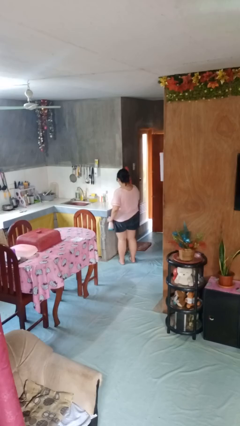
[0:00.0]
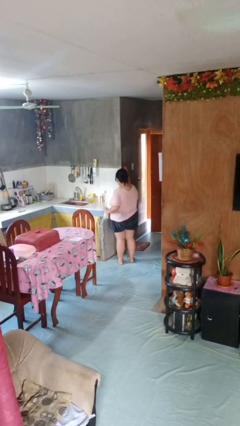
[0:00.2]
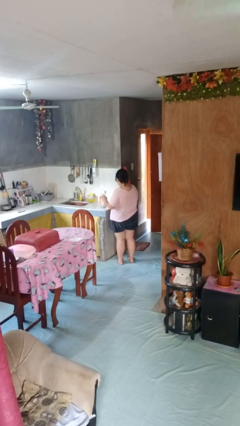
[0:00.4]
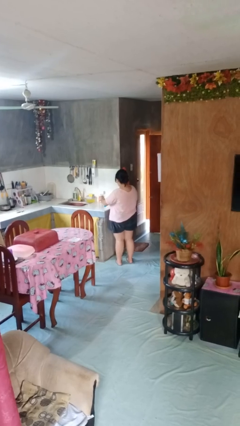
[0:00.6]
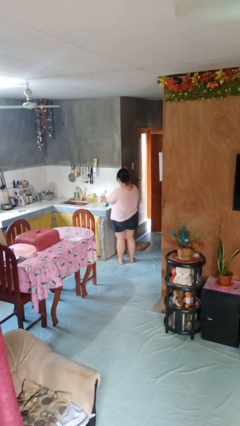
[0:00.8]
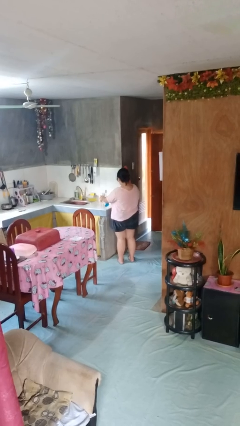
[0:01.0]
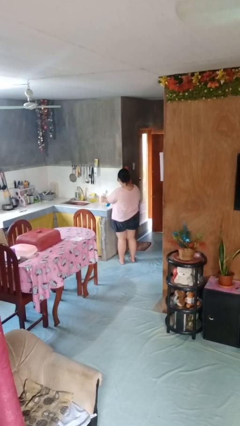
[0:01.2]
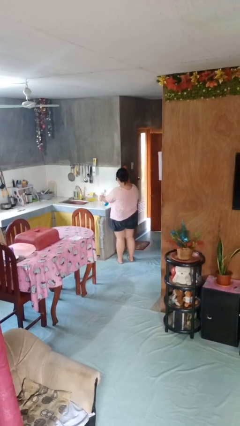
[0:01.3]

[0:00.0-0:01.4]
person sprays from bottle

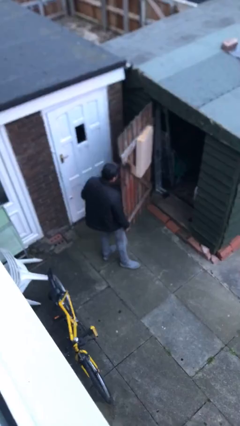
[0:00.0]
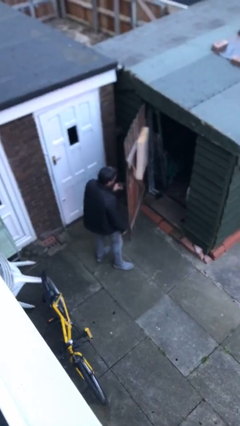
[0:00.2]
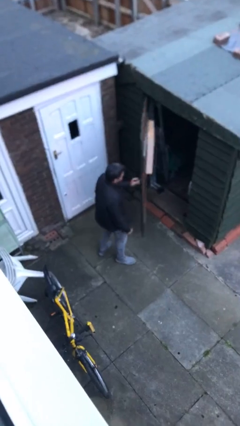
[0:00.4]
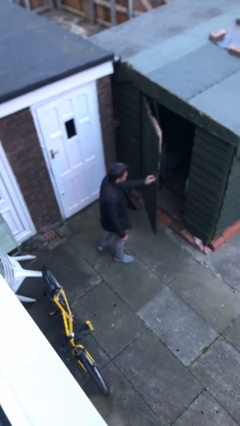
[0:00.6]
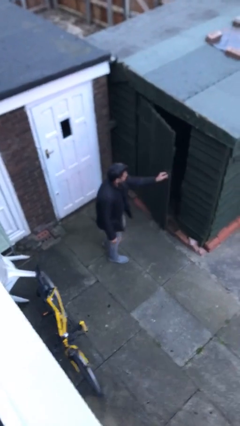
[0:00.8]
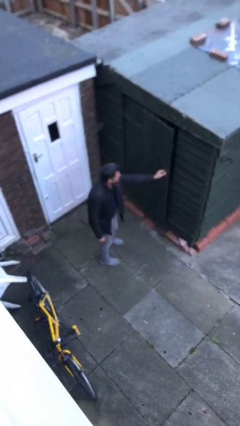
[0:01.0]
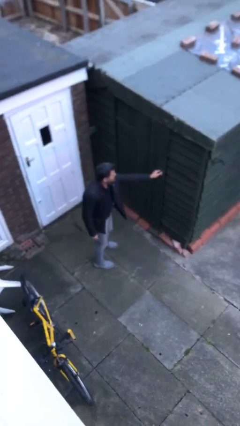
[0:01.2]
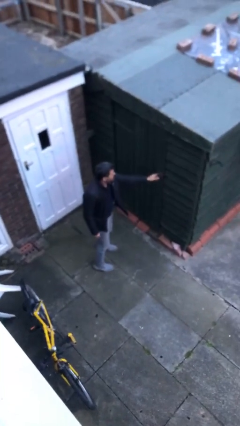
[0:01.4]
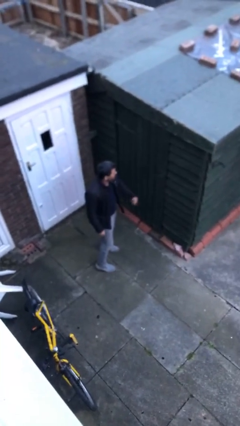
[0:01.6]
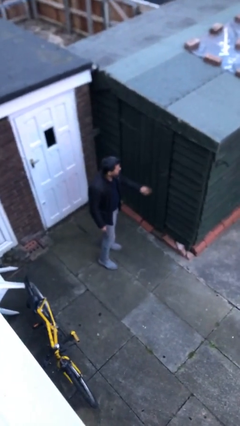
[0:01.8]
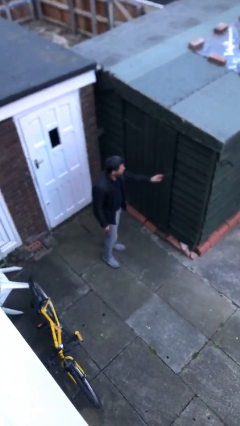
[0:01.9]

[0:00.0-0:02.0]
person closes facility door

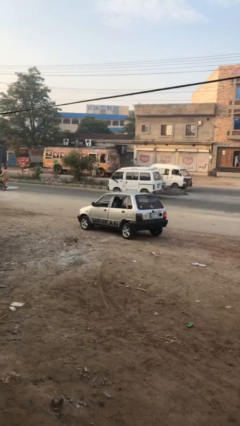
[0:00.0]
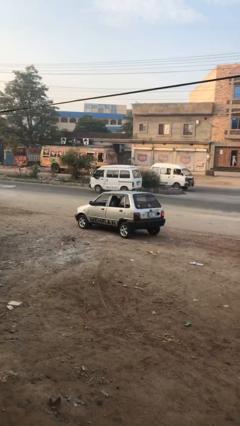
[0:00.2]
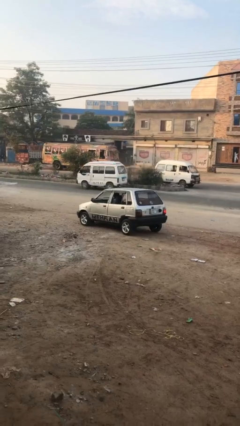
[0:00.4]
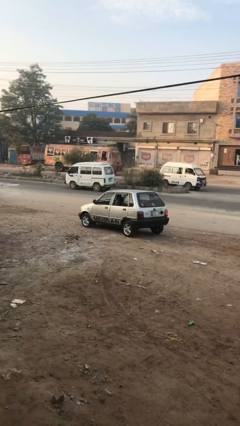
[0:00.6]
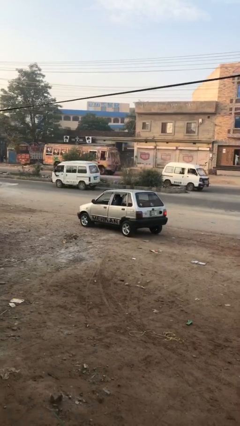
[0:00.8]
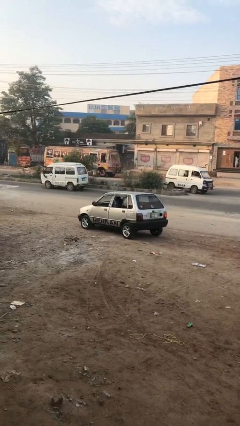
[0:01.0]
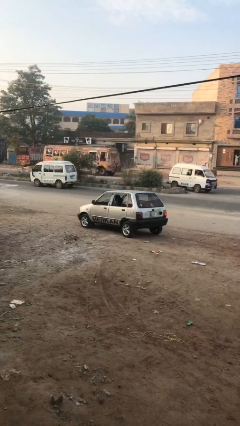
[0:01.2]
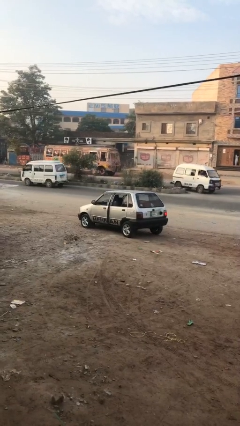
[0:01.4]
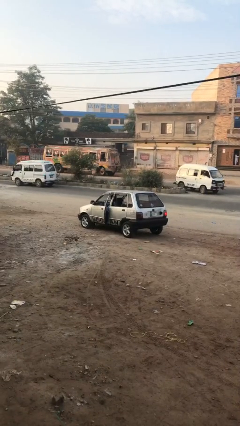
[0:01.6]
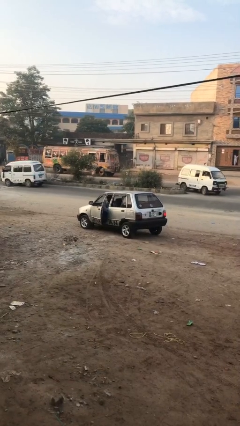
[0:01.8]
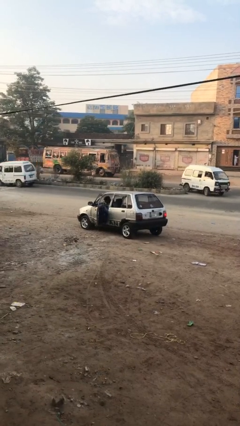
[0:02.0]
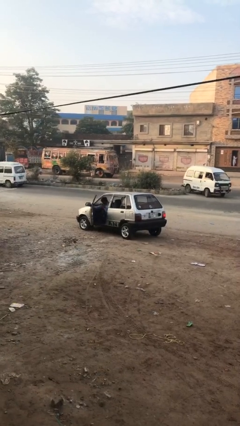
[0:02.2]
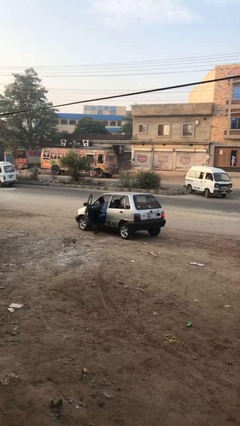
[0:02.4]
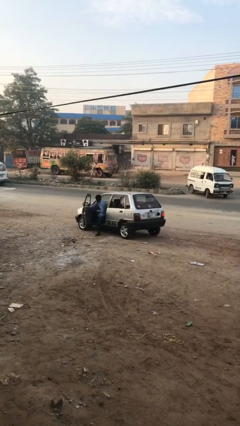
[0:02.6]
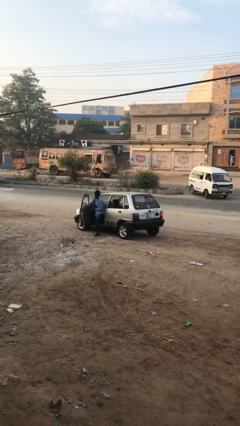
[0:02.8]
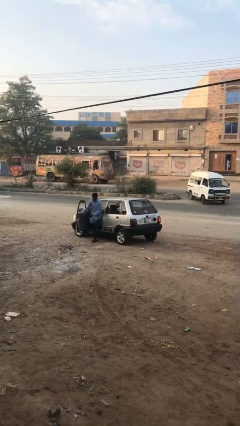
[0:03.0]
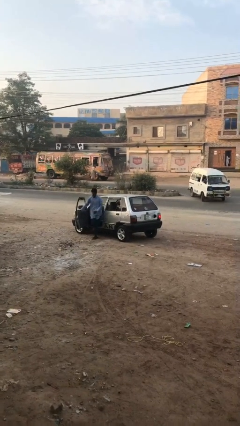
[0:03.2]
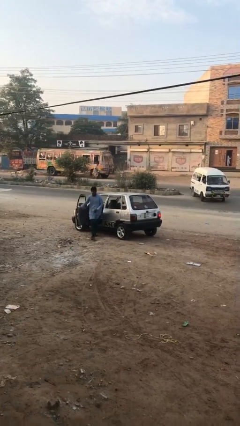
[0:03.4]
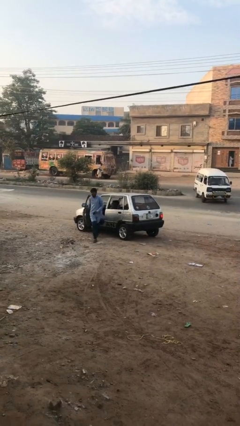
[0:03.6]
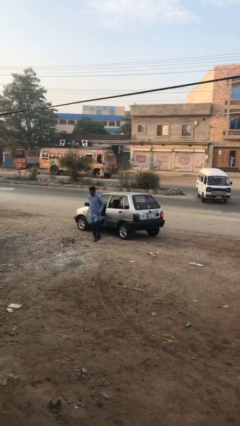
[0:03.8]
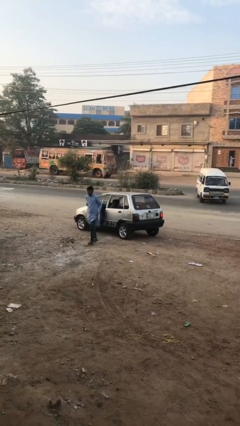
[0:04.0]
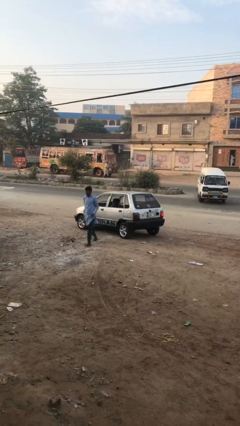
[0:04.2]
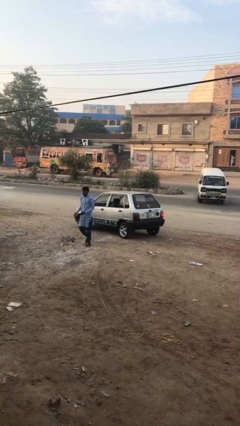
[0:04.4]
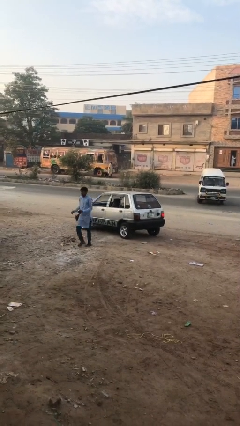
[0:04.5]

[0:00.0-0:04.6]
car drops off person

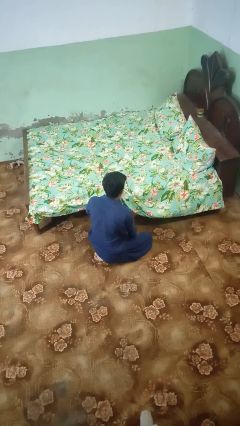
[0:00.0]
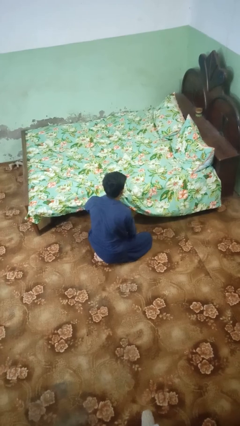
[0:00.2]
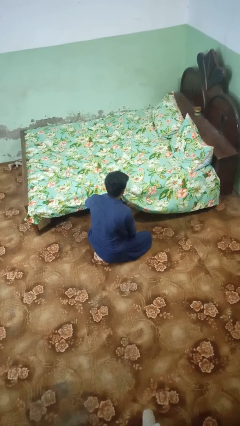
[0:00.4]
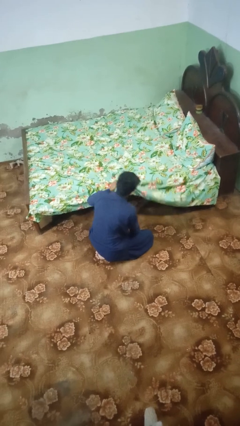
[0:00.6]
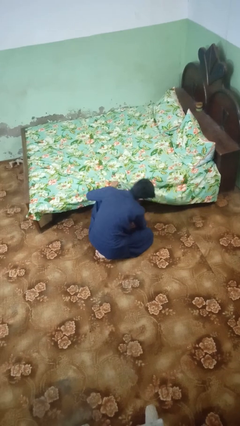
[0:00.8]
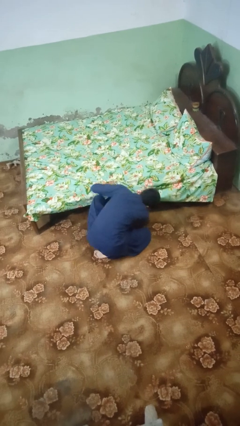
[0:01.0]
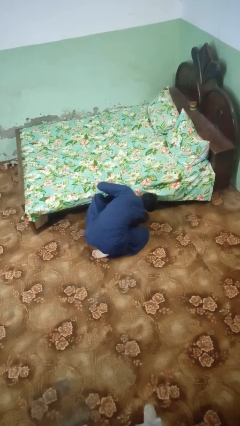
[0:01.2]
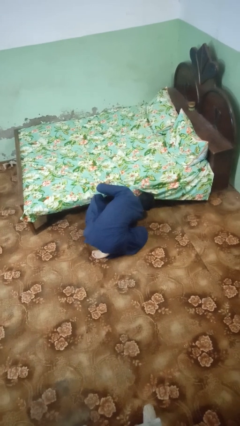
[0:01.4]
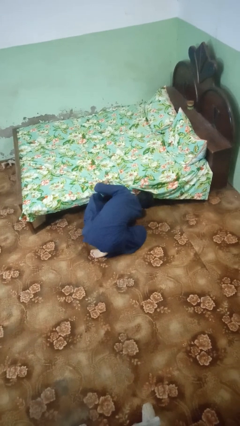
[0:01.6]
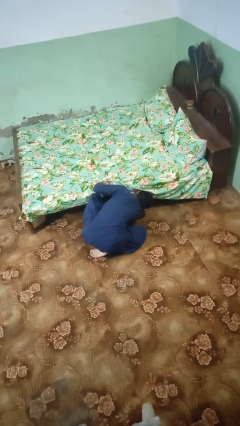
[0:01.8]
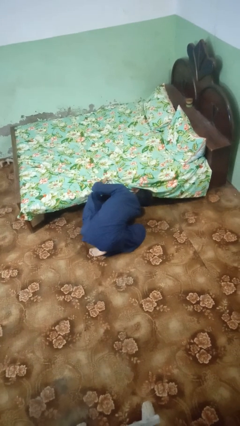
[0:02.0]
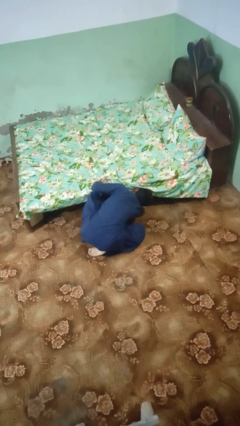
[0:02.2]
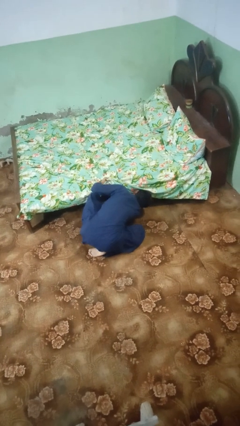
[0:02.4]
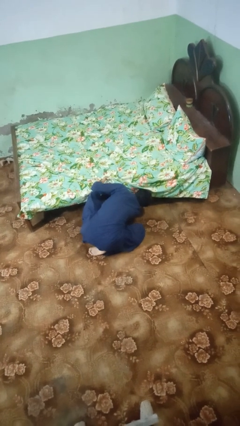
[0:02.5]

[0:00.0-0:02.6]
person searches under bed

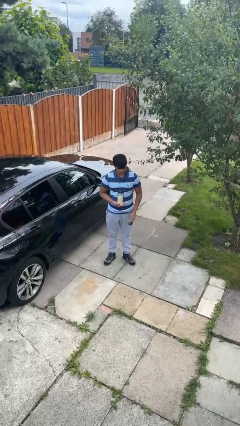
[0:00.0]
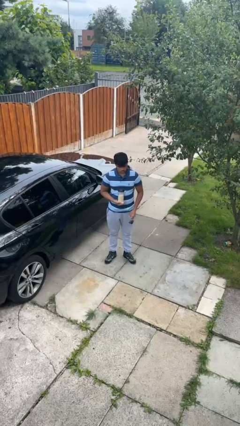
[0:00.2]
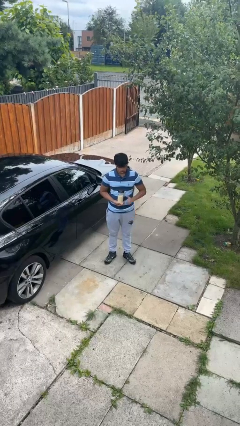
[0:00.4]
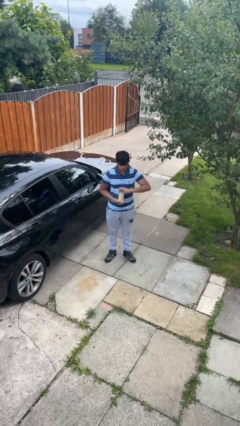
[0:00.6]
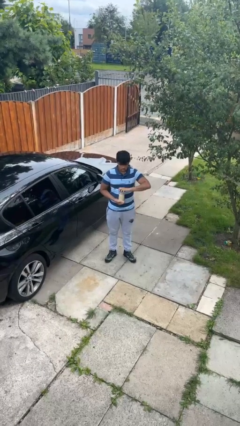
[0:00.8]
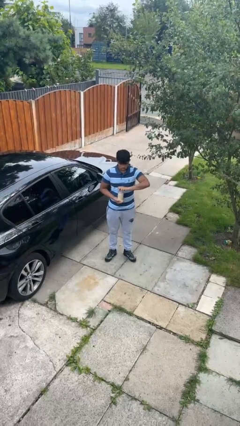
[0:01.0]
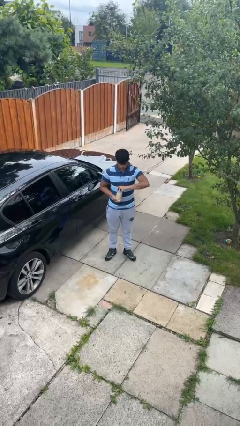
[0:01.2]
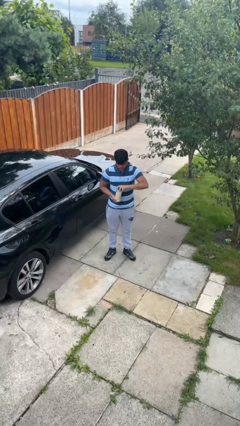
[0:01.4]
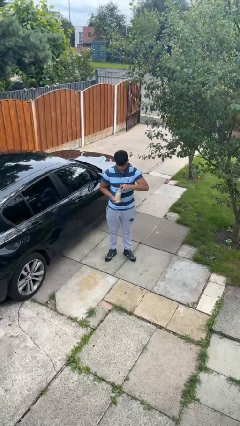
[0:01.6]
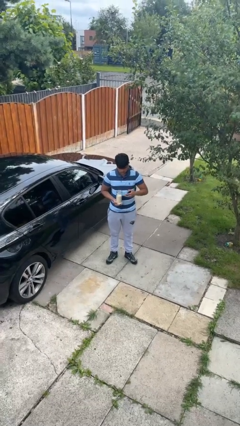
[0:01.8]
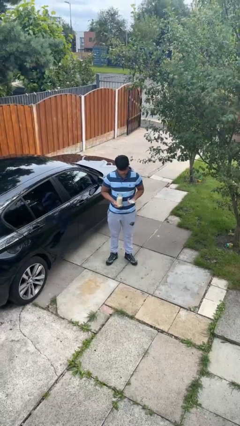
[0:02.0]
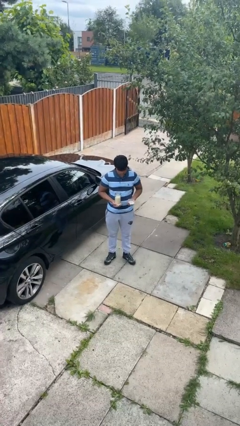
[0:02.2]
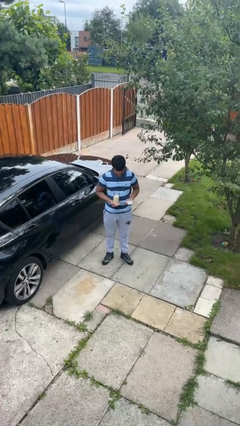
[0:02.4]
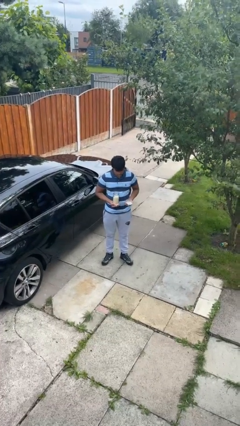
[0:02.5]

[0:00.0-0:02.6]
person opens jar

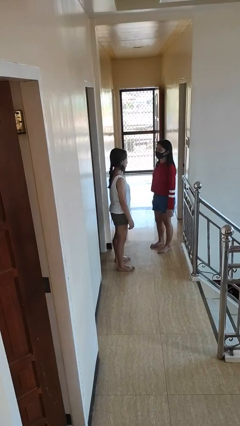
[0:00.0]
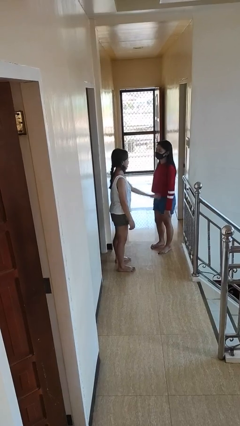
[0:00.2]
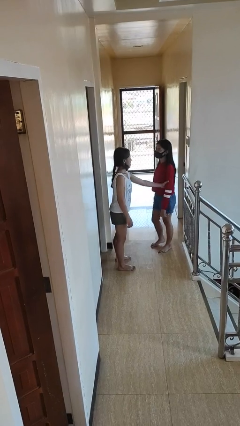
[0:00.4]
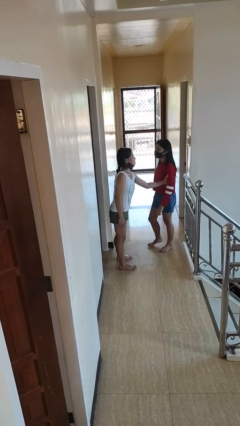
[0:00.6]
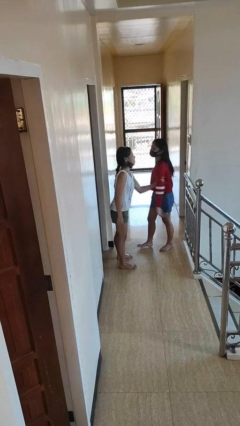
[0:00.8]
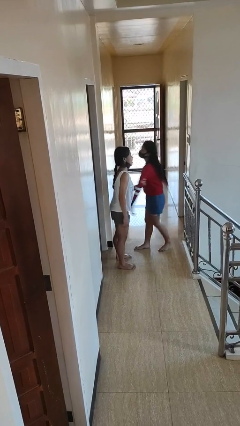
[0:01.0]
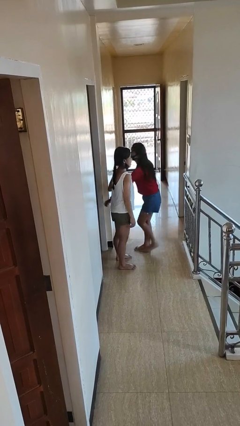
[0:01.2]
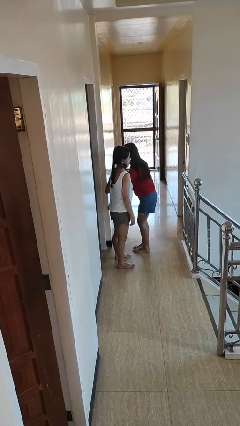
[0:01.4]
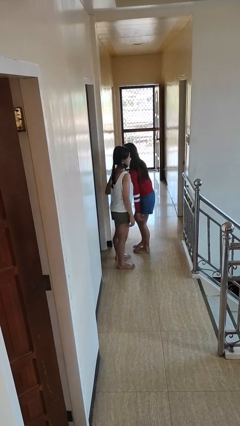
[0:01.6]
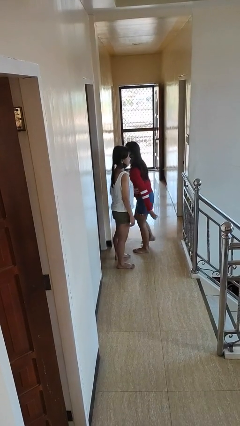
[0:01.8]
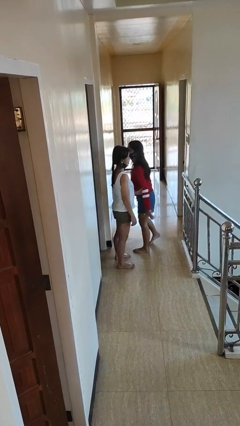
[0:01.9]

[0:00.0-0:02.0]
person grabs person by bicep

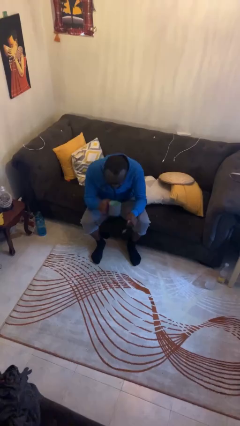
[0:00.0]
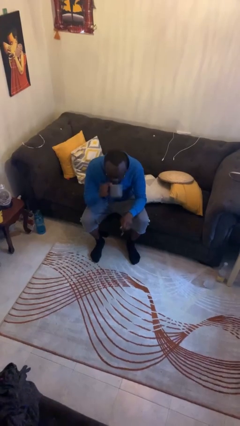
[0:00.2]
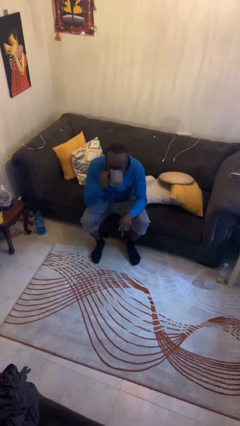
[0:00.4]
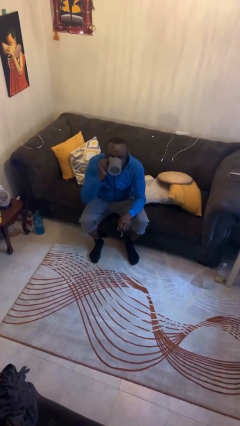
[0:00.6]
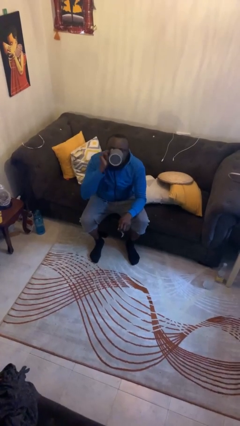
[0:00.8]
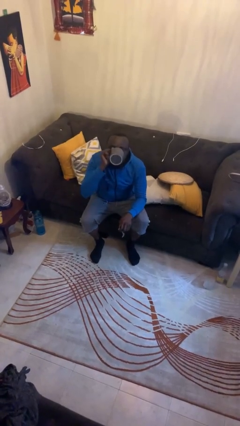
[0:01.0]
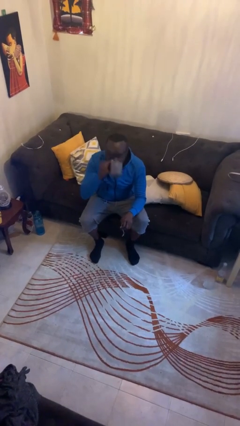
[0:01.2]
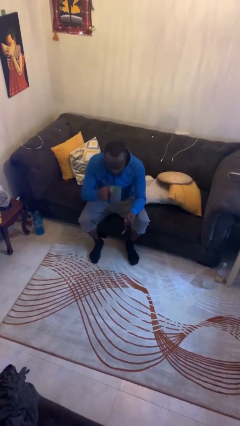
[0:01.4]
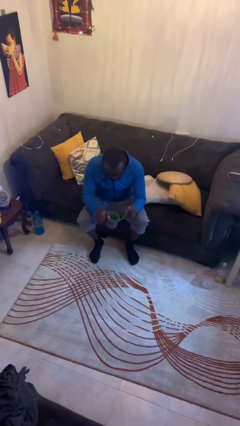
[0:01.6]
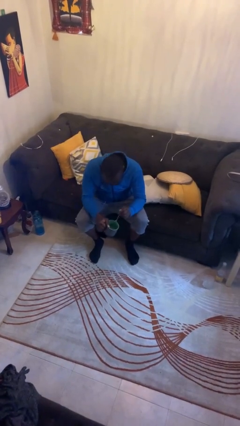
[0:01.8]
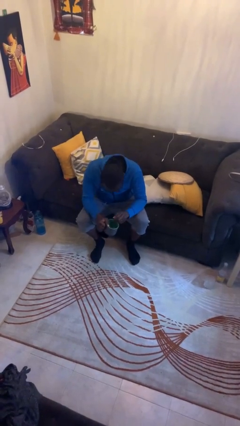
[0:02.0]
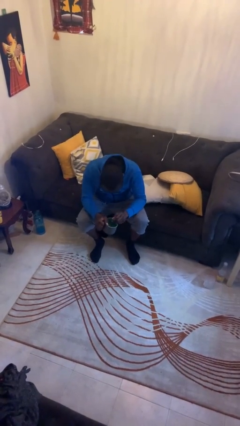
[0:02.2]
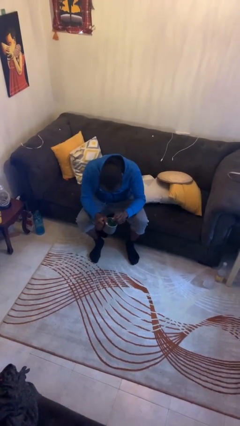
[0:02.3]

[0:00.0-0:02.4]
person drinks from mug
